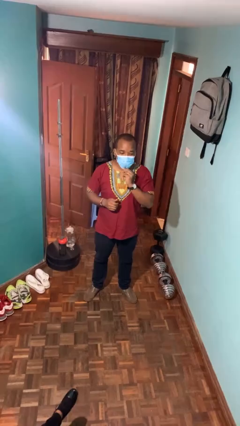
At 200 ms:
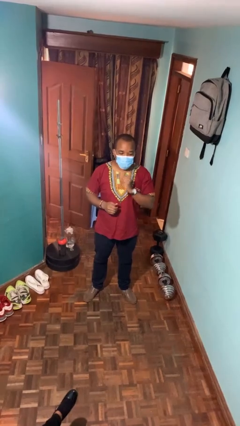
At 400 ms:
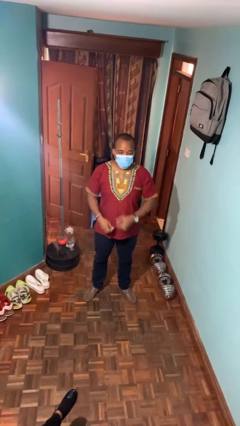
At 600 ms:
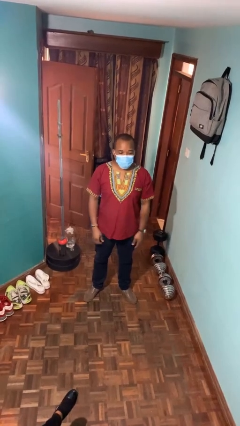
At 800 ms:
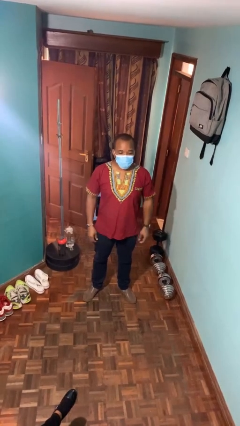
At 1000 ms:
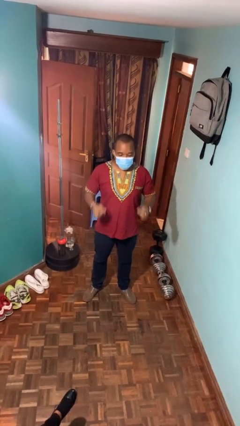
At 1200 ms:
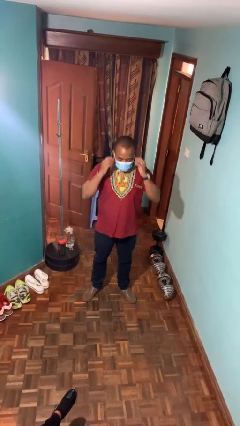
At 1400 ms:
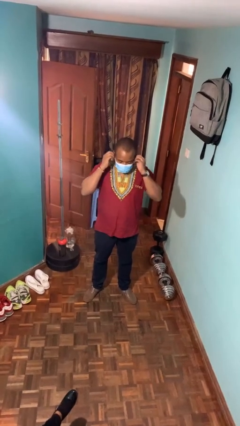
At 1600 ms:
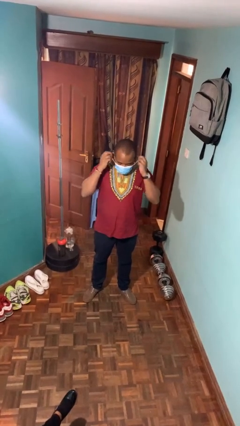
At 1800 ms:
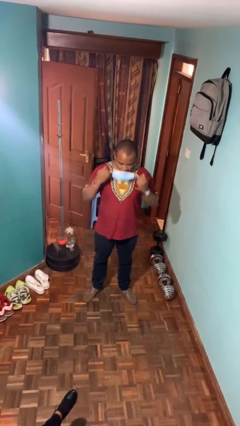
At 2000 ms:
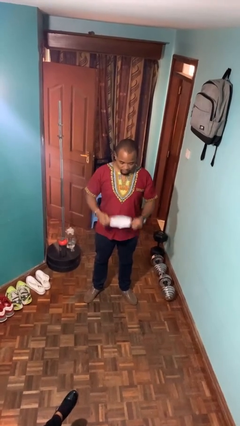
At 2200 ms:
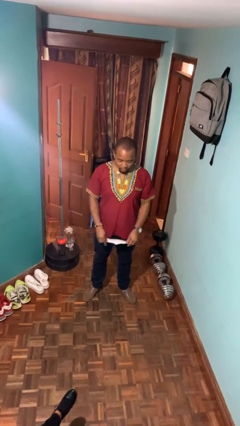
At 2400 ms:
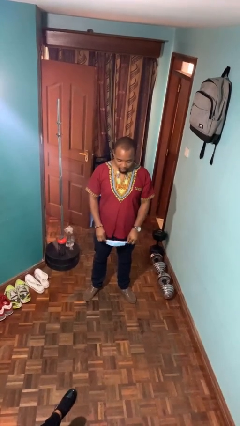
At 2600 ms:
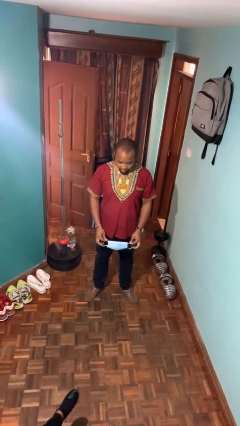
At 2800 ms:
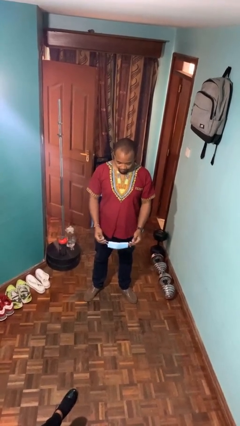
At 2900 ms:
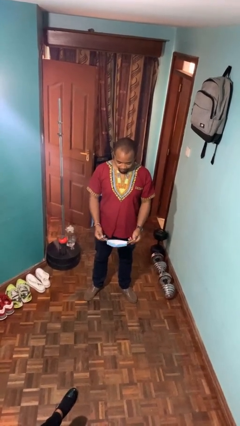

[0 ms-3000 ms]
person takes off facemask

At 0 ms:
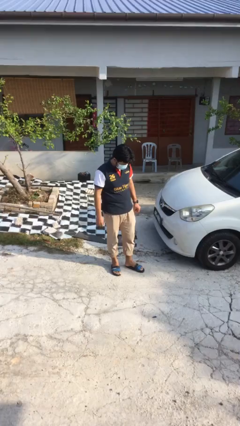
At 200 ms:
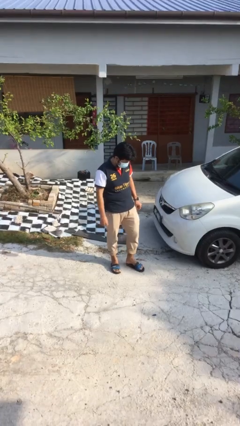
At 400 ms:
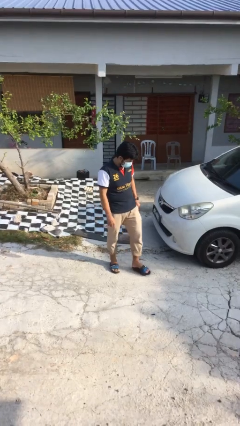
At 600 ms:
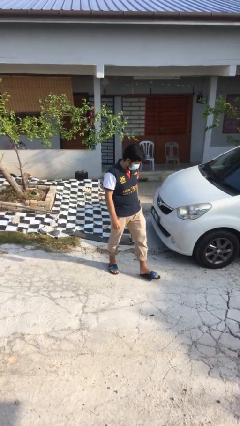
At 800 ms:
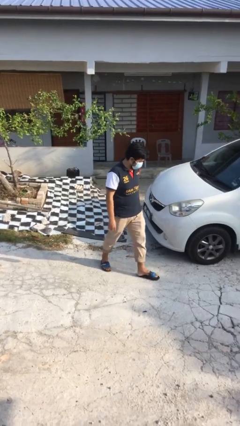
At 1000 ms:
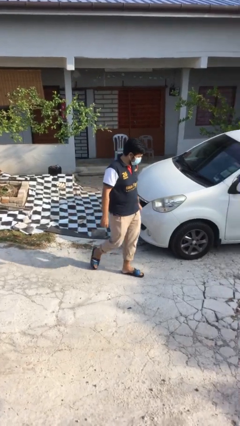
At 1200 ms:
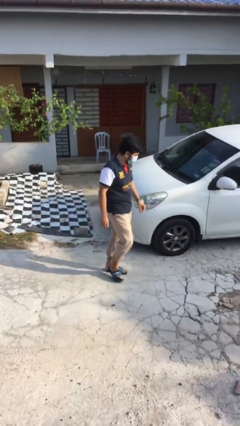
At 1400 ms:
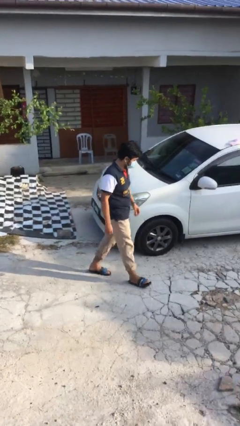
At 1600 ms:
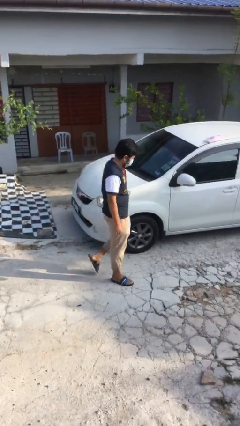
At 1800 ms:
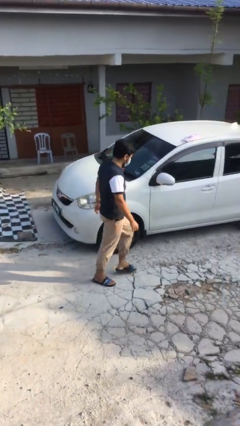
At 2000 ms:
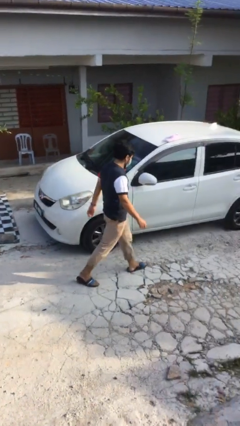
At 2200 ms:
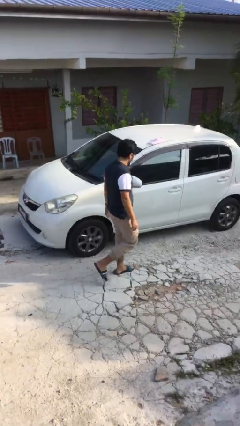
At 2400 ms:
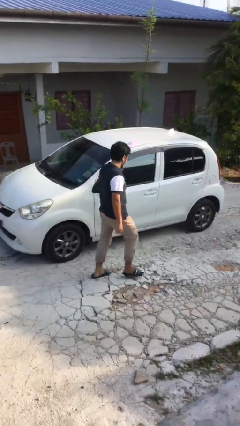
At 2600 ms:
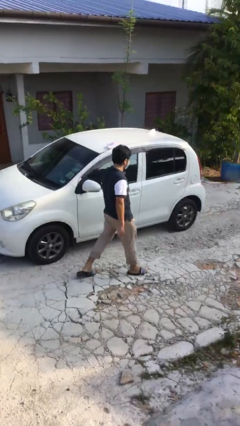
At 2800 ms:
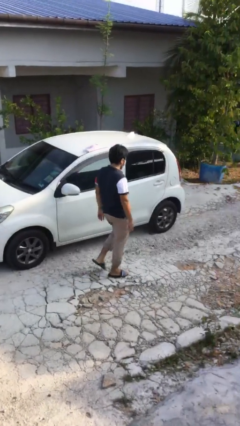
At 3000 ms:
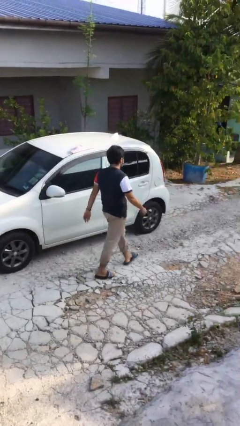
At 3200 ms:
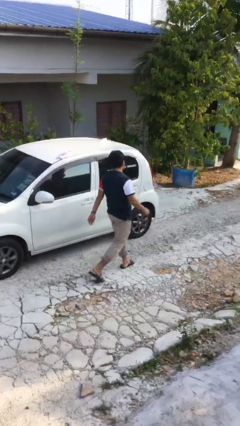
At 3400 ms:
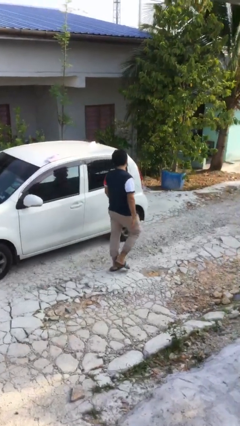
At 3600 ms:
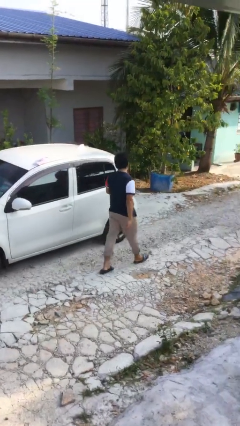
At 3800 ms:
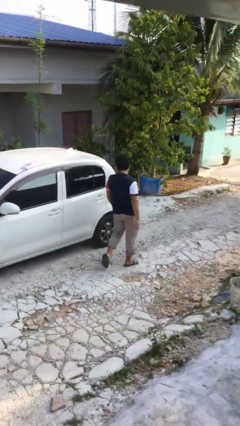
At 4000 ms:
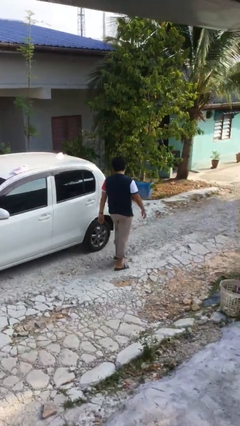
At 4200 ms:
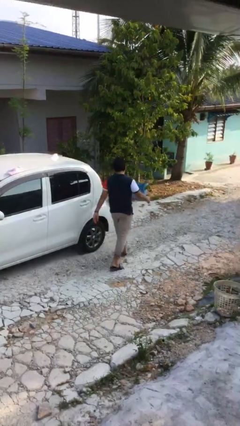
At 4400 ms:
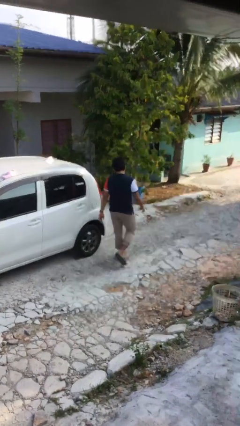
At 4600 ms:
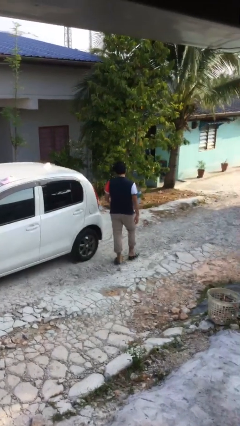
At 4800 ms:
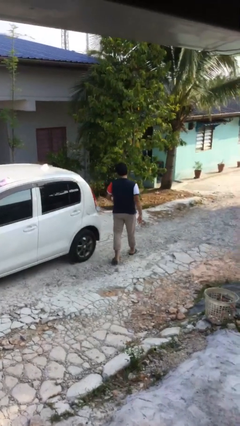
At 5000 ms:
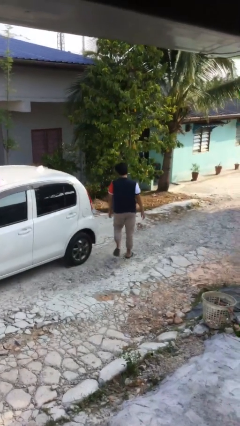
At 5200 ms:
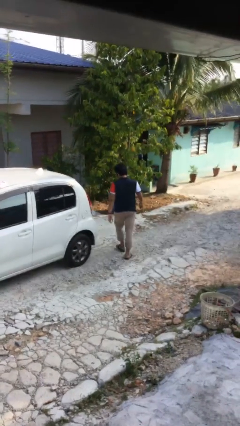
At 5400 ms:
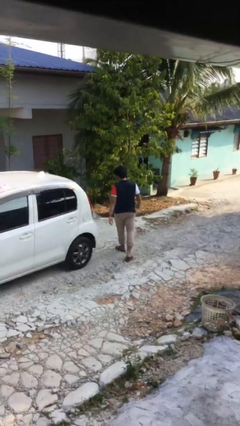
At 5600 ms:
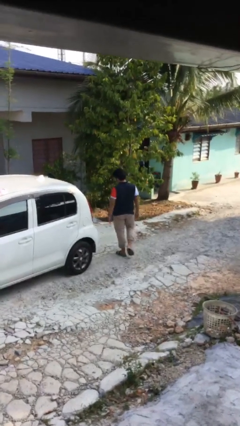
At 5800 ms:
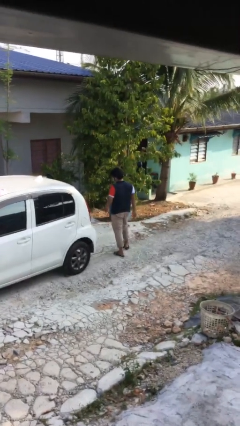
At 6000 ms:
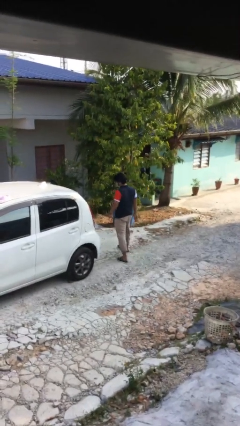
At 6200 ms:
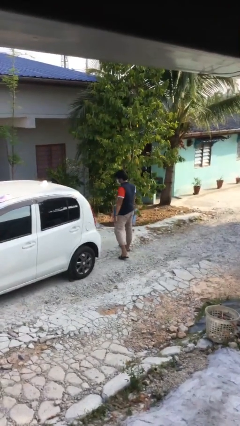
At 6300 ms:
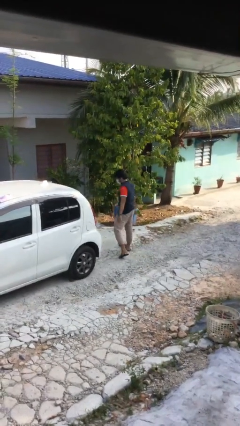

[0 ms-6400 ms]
person walks around car

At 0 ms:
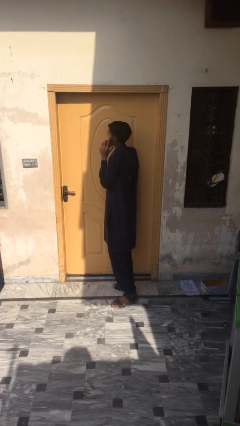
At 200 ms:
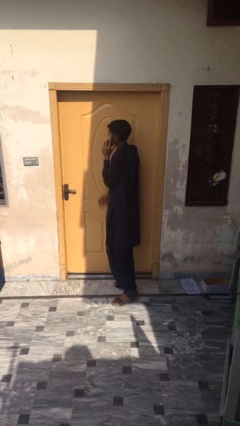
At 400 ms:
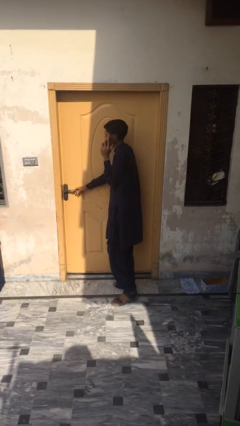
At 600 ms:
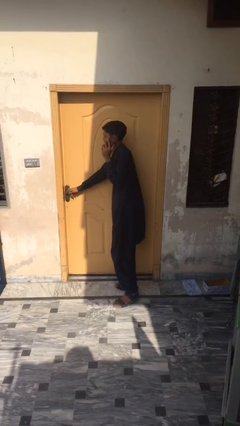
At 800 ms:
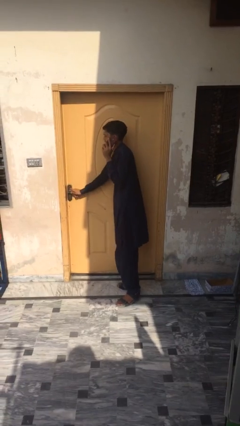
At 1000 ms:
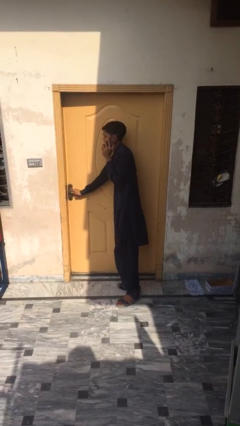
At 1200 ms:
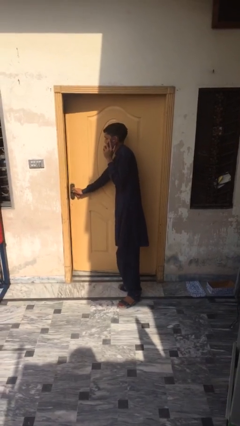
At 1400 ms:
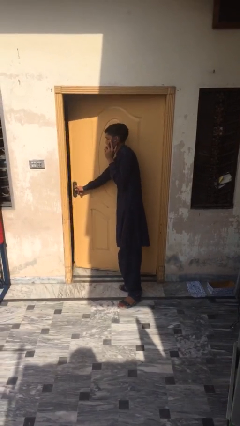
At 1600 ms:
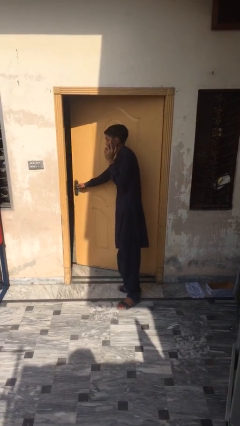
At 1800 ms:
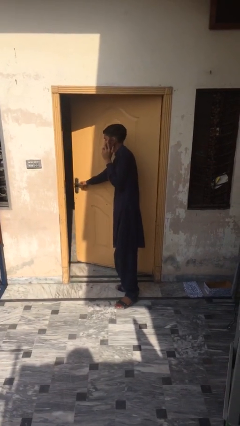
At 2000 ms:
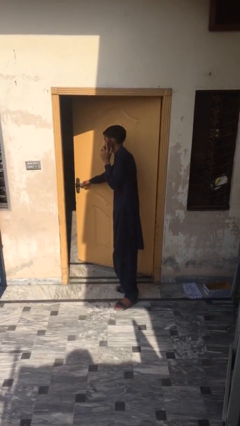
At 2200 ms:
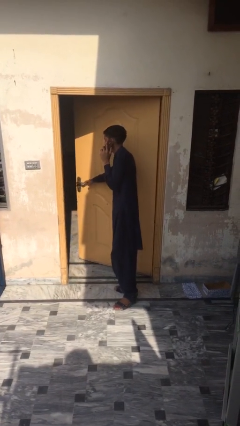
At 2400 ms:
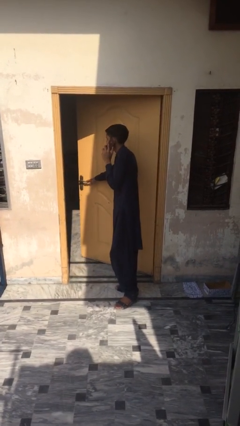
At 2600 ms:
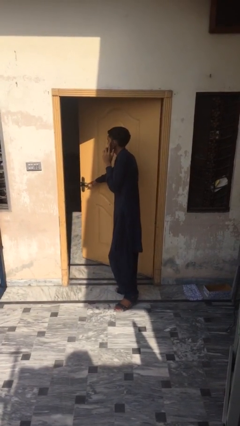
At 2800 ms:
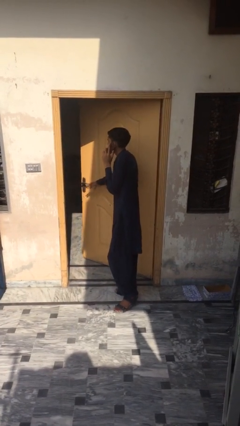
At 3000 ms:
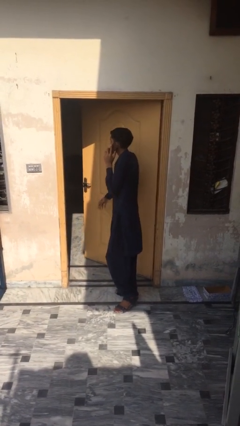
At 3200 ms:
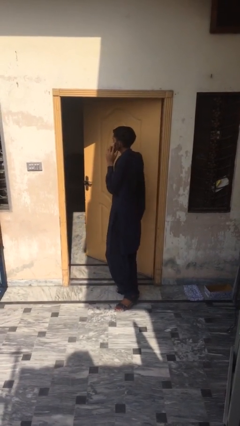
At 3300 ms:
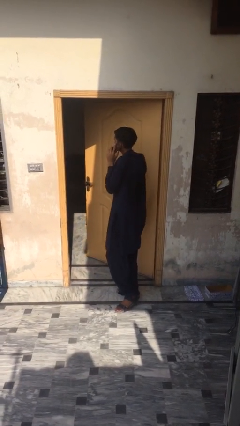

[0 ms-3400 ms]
person opens facility door

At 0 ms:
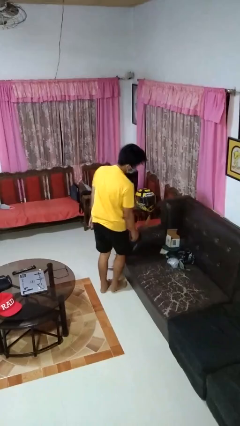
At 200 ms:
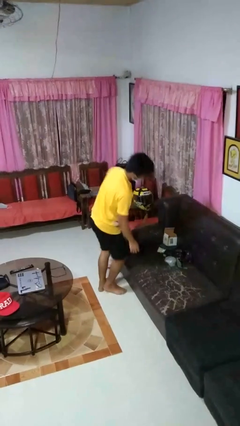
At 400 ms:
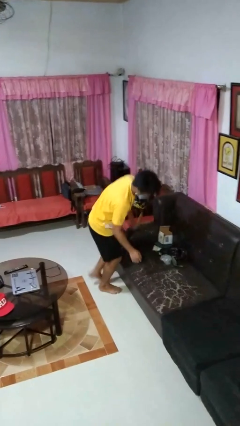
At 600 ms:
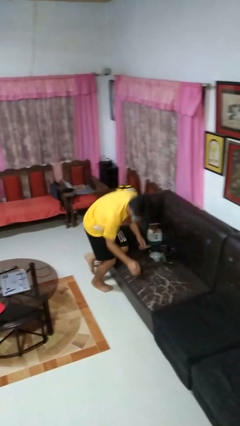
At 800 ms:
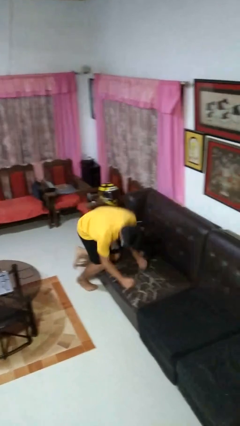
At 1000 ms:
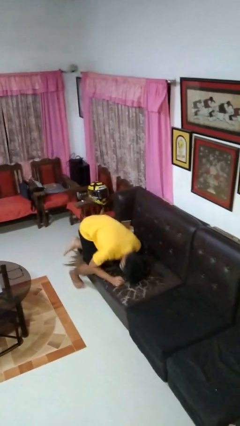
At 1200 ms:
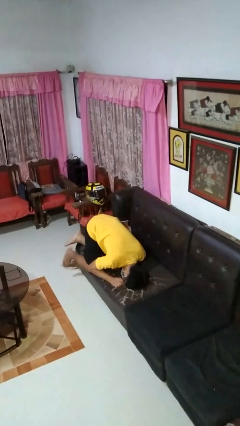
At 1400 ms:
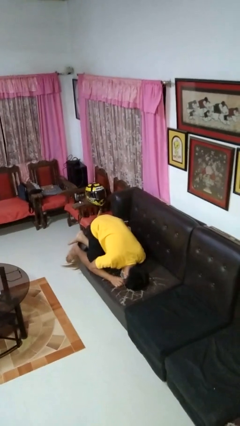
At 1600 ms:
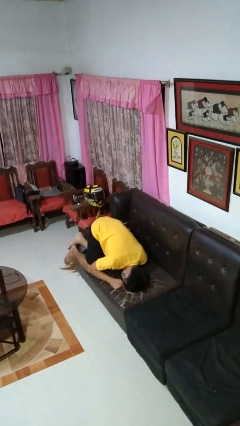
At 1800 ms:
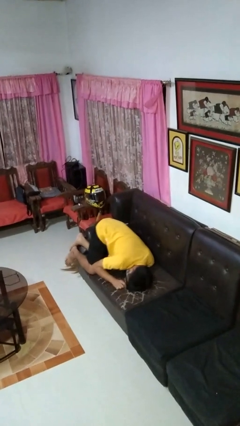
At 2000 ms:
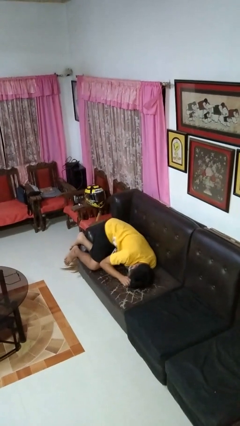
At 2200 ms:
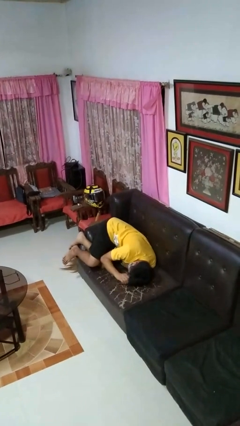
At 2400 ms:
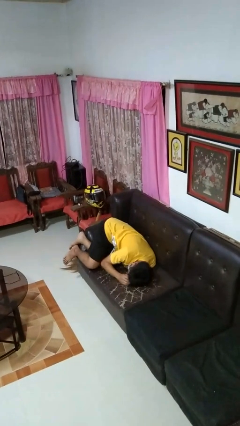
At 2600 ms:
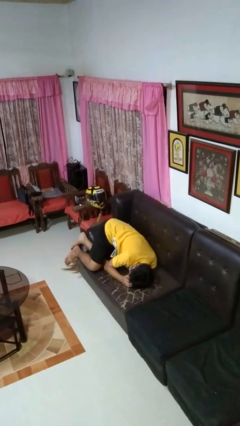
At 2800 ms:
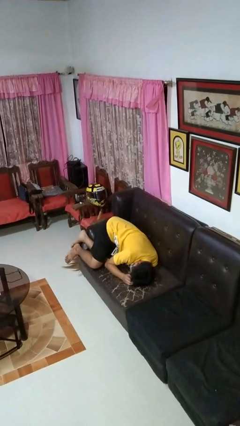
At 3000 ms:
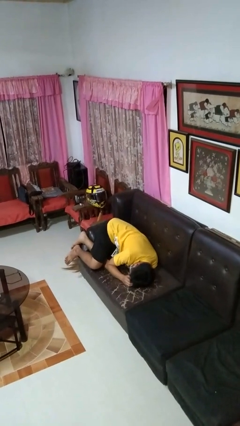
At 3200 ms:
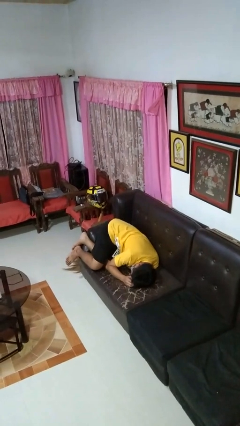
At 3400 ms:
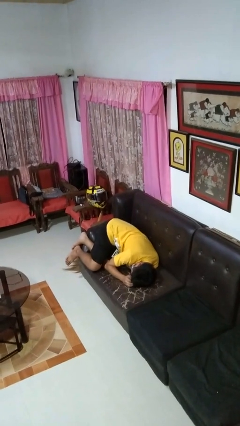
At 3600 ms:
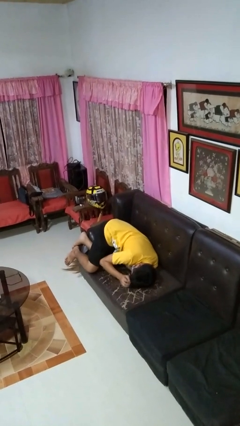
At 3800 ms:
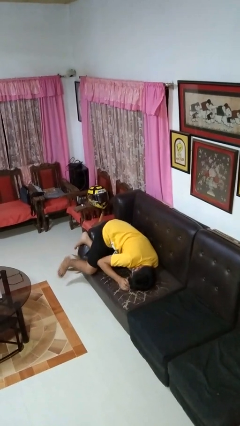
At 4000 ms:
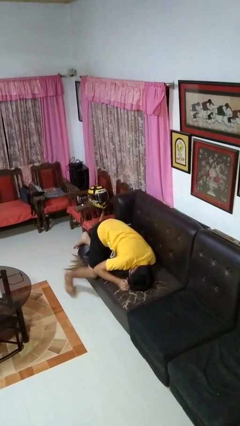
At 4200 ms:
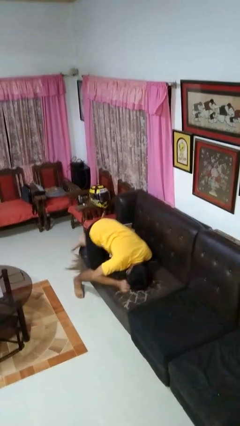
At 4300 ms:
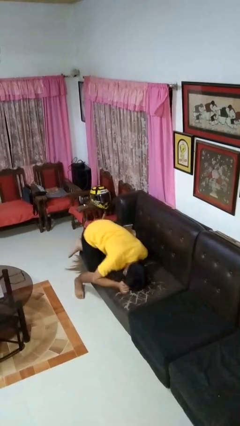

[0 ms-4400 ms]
person lies down on couch

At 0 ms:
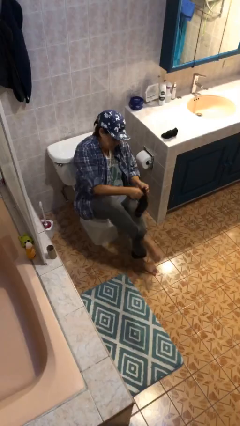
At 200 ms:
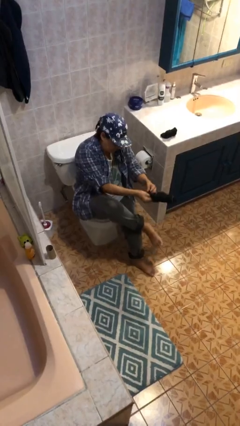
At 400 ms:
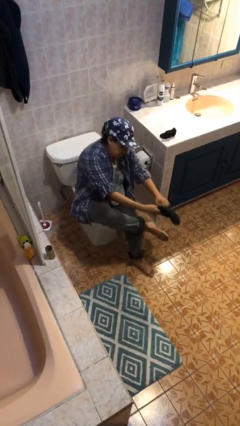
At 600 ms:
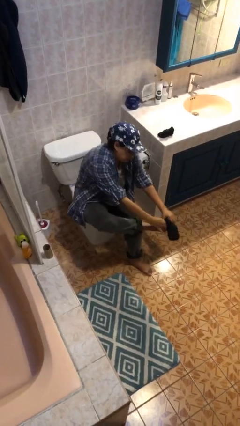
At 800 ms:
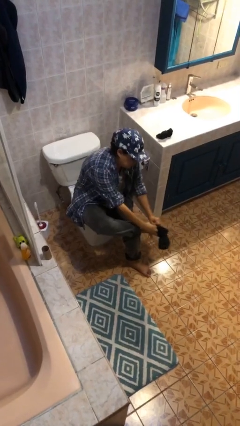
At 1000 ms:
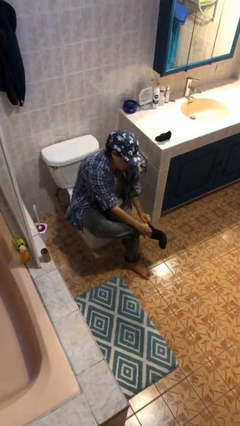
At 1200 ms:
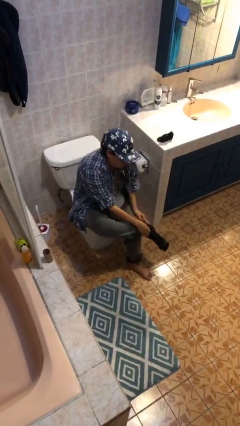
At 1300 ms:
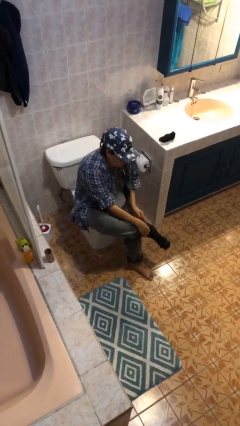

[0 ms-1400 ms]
person puts on socks
